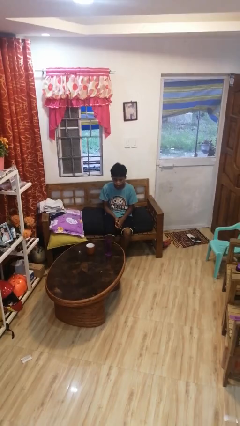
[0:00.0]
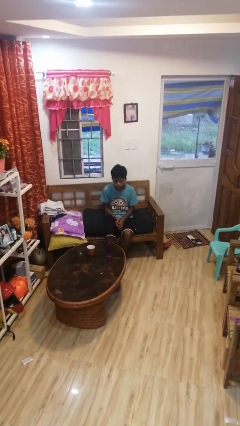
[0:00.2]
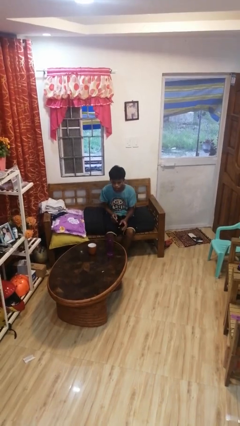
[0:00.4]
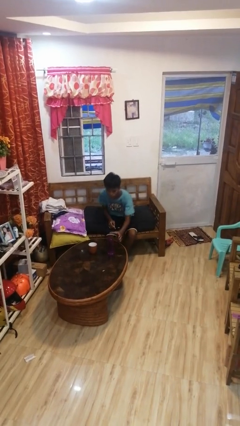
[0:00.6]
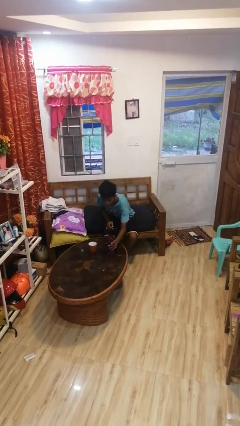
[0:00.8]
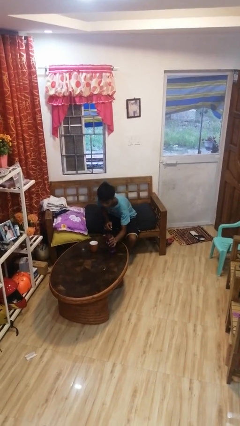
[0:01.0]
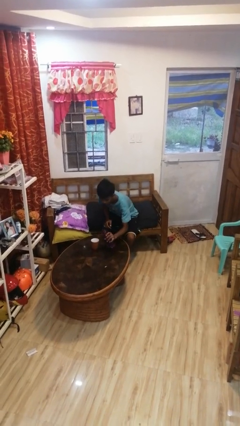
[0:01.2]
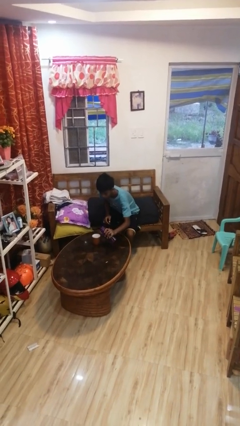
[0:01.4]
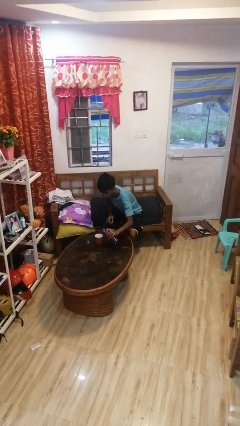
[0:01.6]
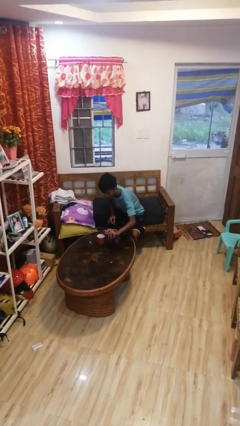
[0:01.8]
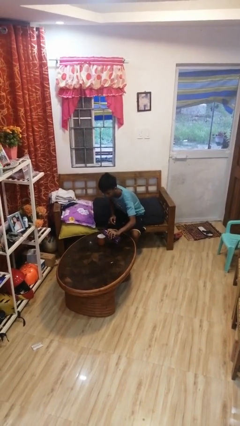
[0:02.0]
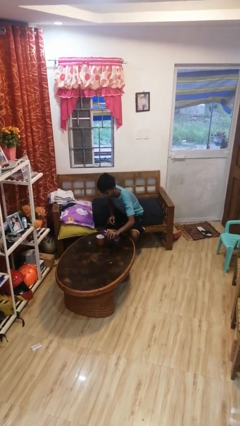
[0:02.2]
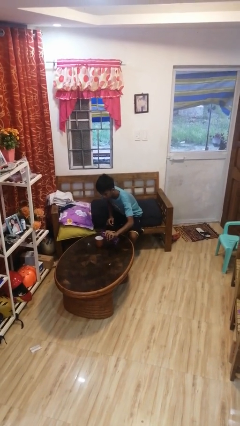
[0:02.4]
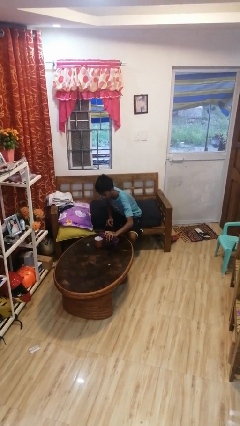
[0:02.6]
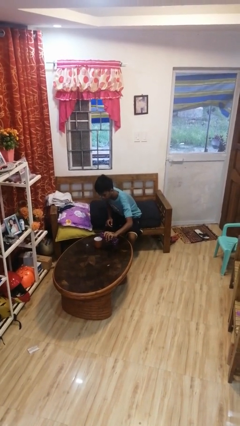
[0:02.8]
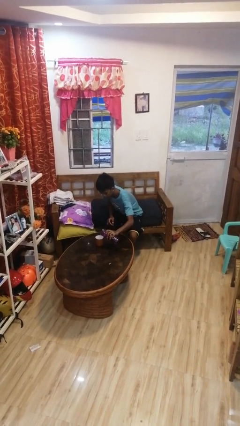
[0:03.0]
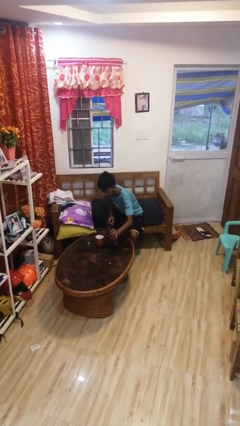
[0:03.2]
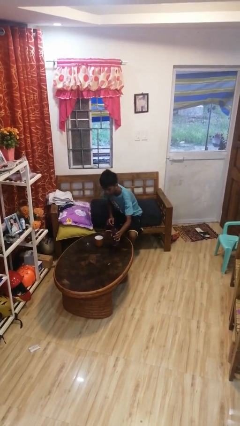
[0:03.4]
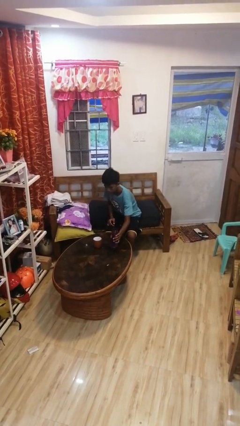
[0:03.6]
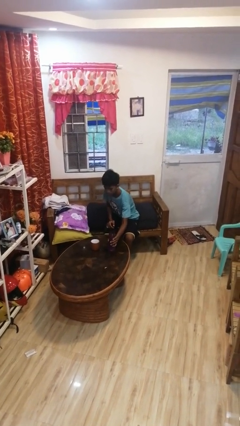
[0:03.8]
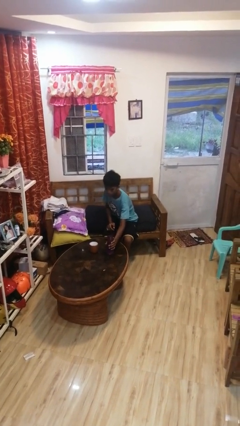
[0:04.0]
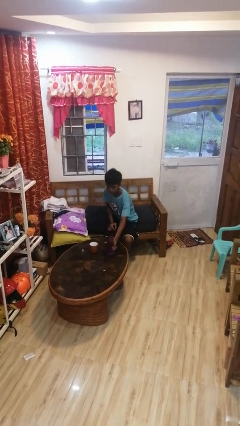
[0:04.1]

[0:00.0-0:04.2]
person pours liquid into cup

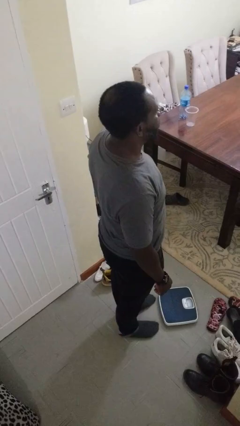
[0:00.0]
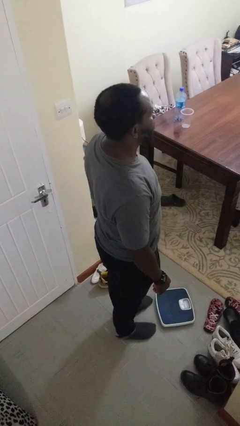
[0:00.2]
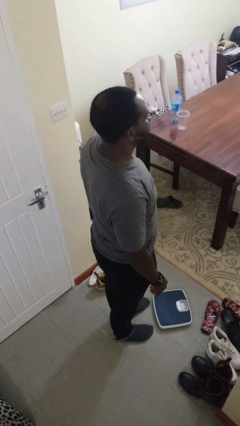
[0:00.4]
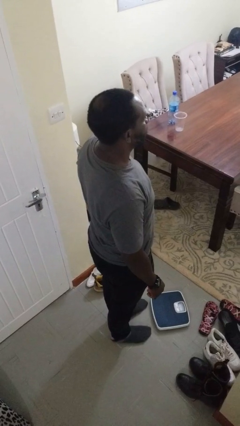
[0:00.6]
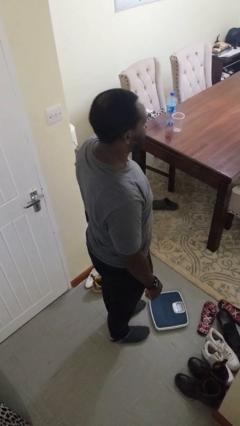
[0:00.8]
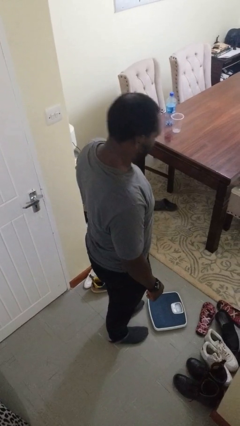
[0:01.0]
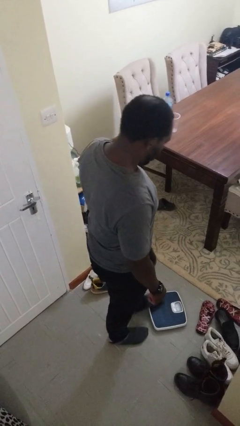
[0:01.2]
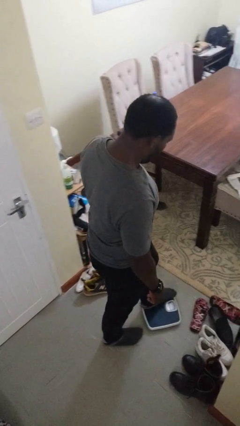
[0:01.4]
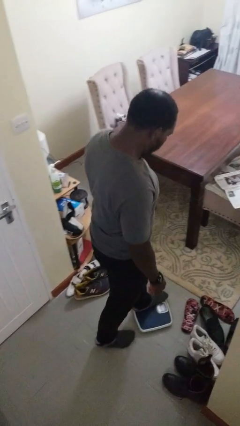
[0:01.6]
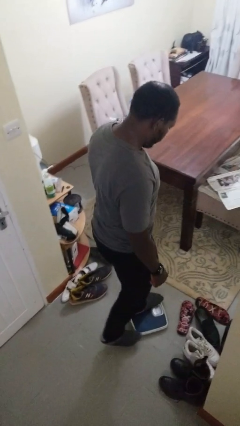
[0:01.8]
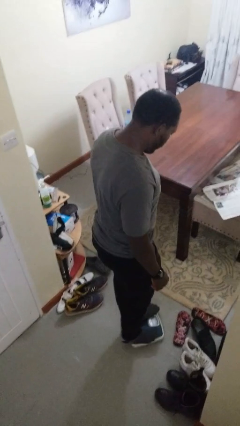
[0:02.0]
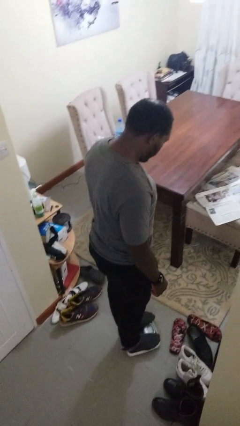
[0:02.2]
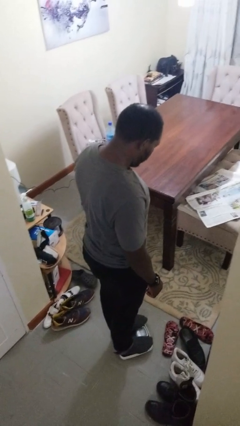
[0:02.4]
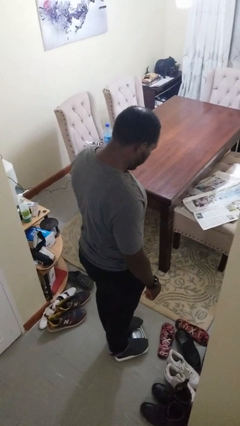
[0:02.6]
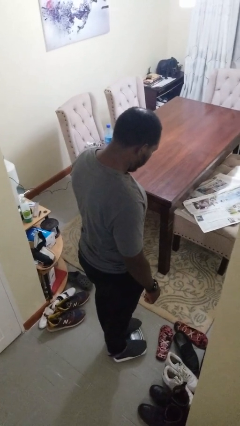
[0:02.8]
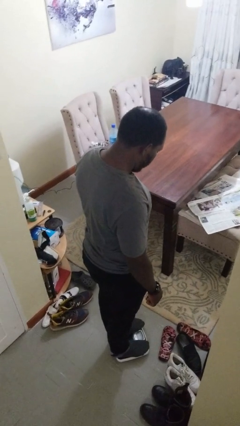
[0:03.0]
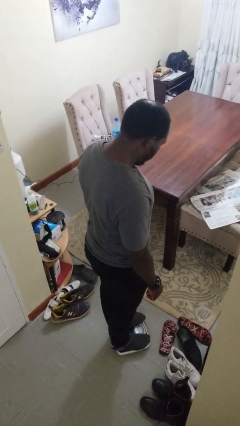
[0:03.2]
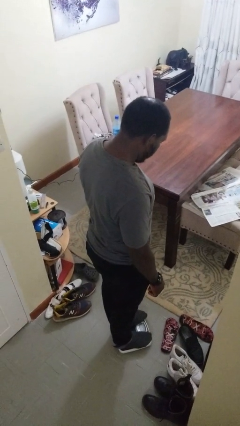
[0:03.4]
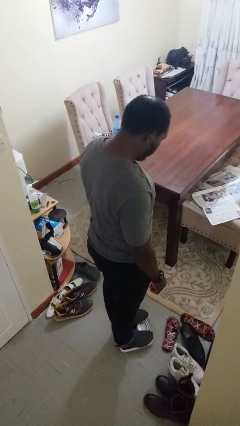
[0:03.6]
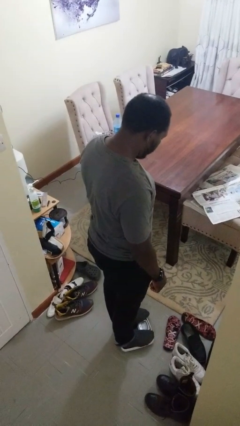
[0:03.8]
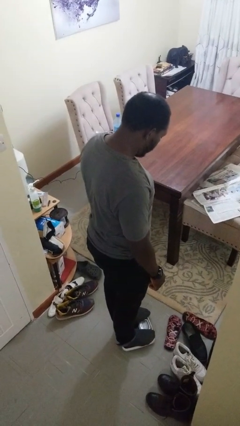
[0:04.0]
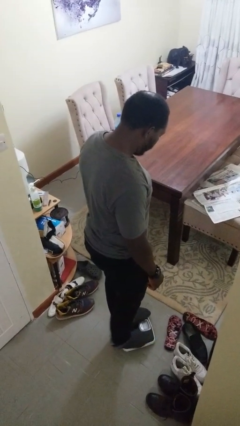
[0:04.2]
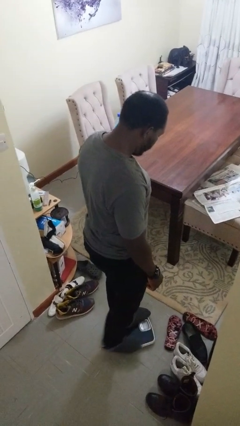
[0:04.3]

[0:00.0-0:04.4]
person uses bodyweight scale

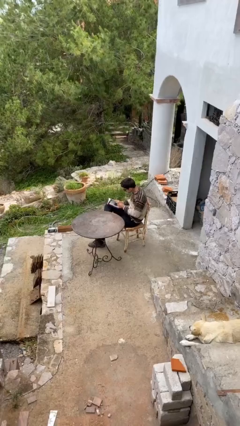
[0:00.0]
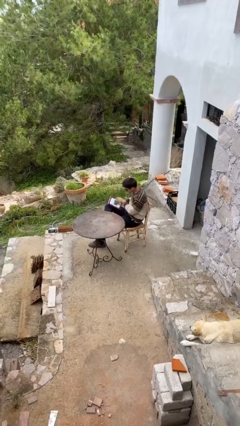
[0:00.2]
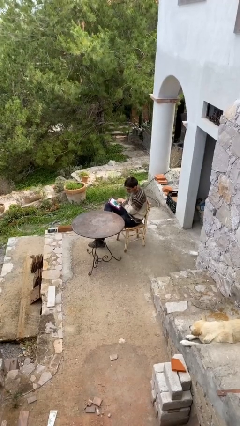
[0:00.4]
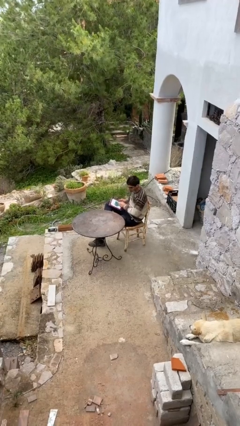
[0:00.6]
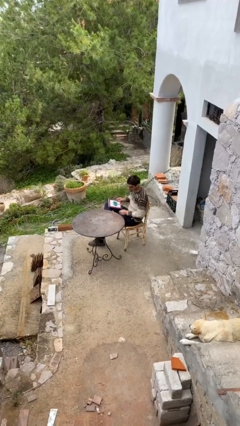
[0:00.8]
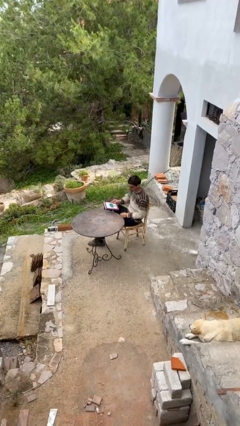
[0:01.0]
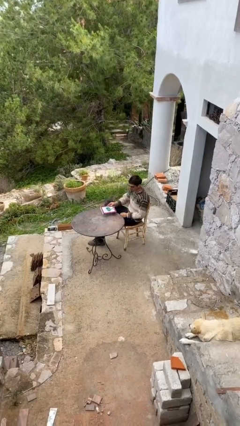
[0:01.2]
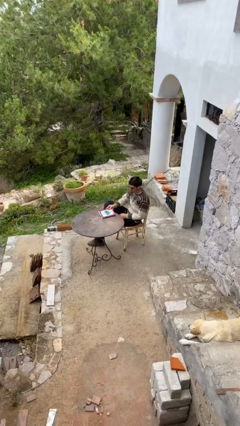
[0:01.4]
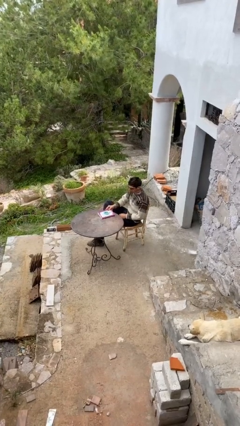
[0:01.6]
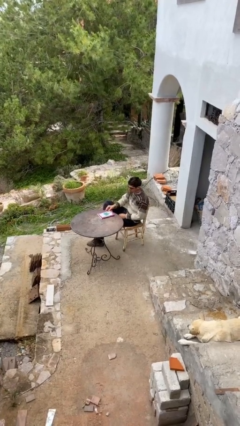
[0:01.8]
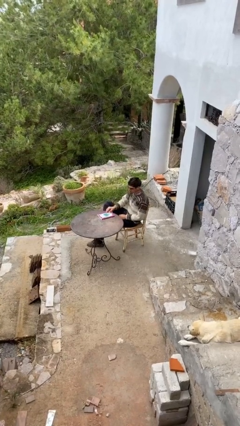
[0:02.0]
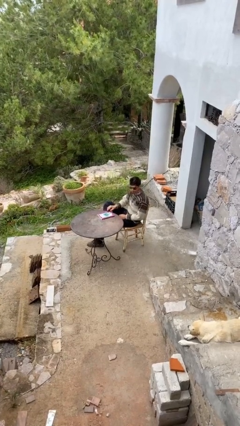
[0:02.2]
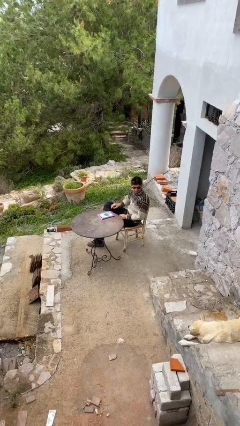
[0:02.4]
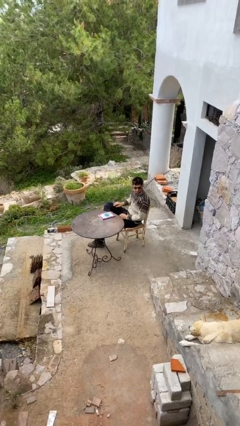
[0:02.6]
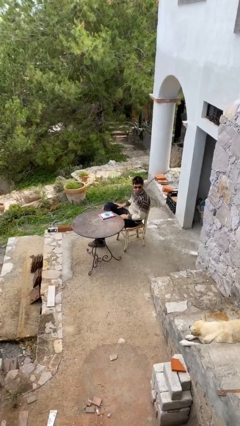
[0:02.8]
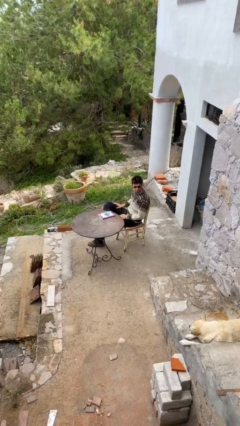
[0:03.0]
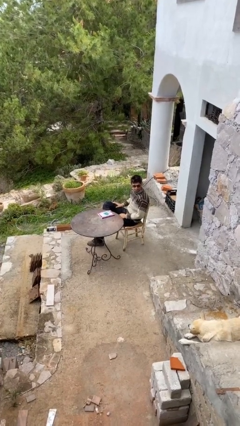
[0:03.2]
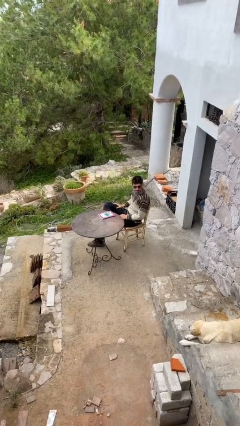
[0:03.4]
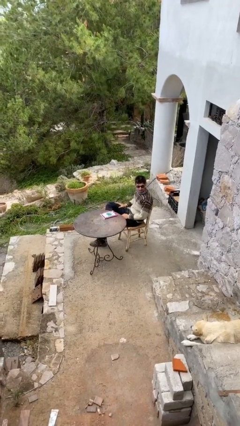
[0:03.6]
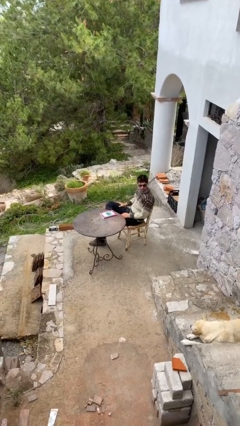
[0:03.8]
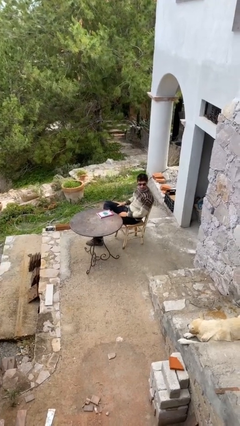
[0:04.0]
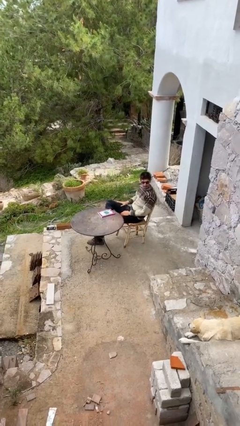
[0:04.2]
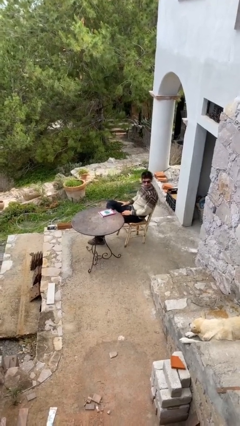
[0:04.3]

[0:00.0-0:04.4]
person puts down object on table

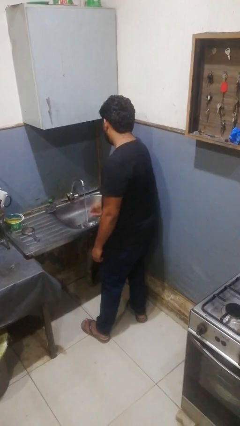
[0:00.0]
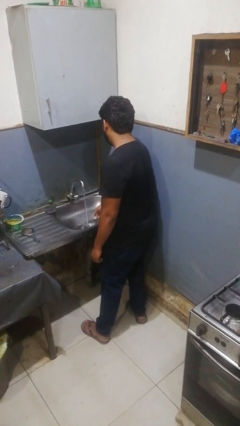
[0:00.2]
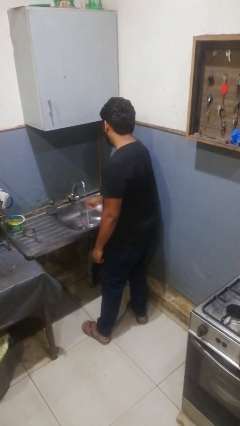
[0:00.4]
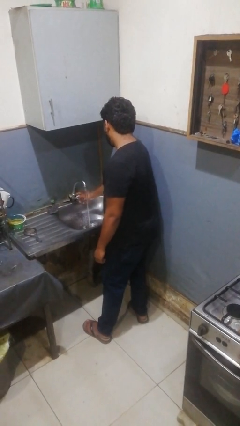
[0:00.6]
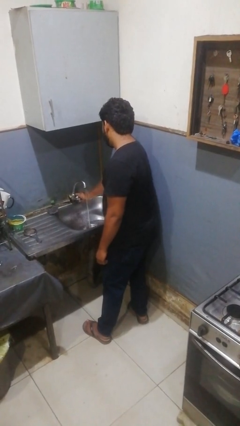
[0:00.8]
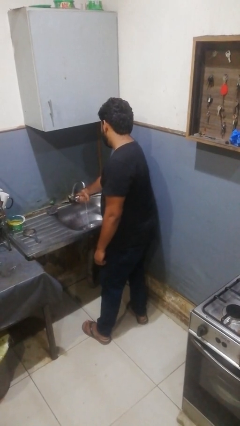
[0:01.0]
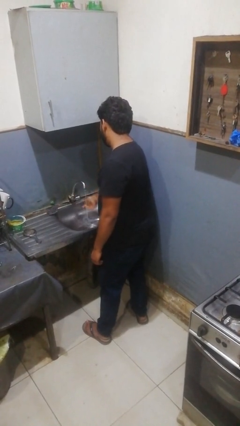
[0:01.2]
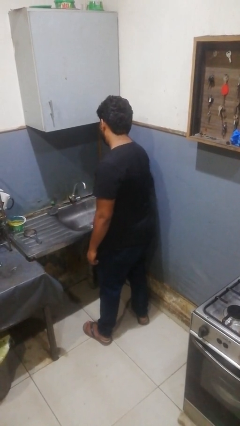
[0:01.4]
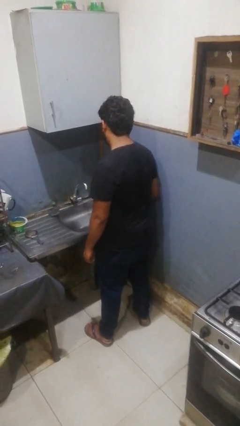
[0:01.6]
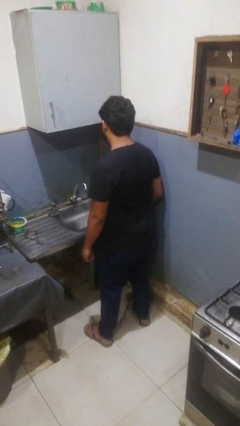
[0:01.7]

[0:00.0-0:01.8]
person turns off faucet

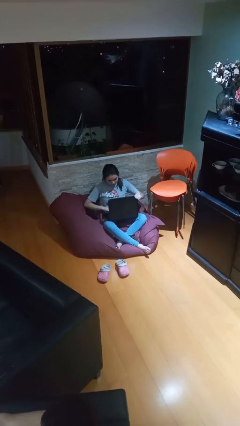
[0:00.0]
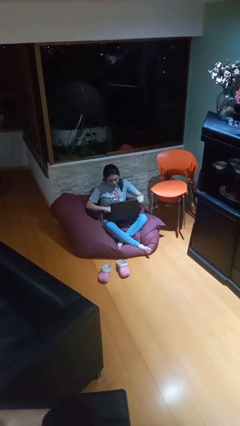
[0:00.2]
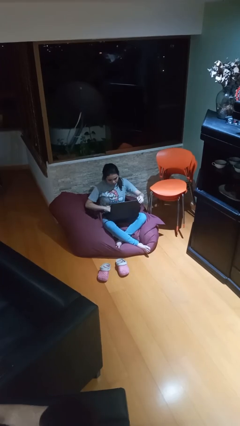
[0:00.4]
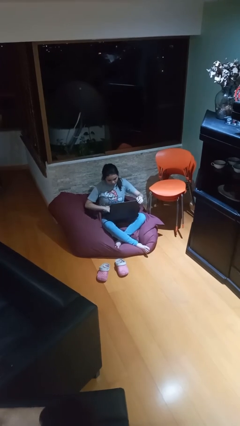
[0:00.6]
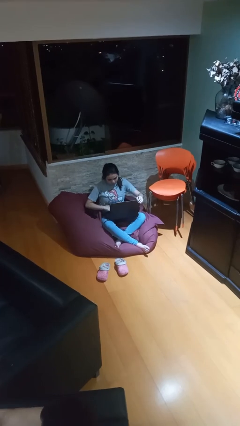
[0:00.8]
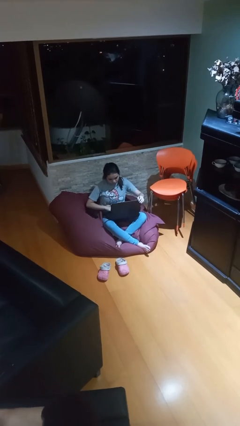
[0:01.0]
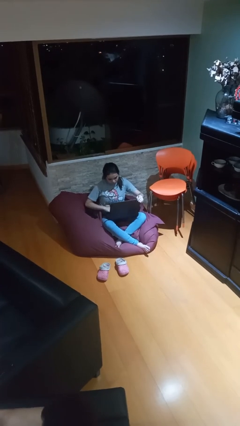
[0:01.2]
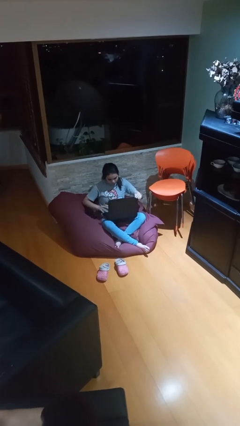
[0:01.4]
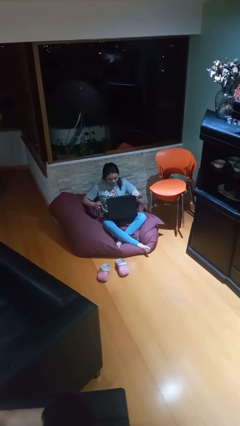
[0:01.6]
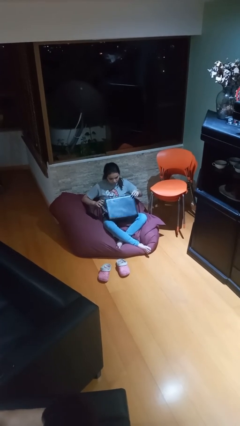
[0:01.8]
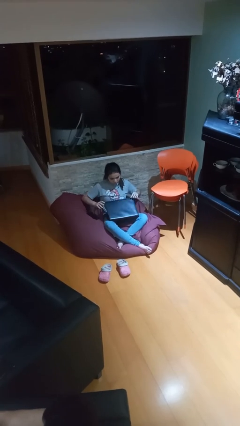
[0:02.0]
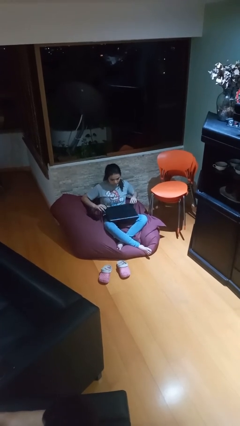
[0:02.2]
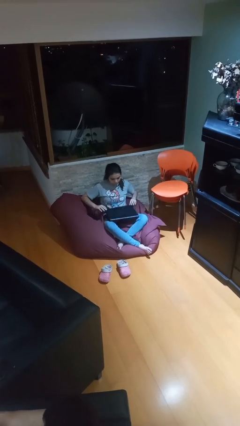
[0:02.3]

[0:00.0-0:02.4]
person interacts with laptop
